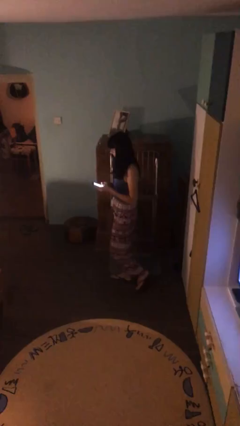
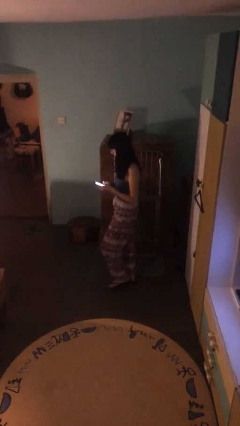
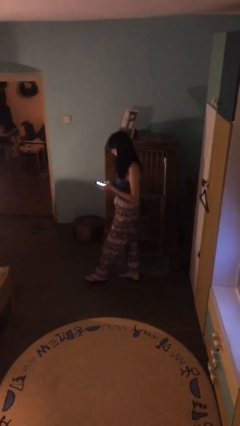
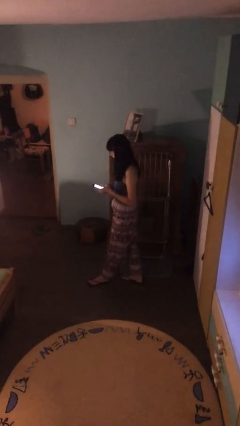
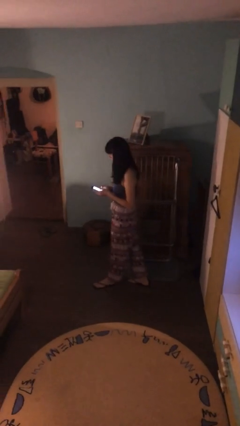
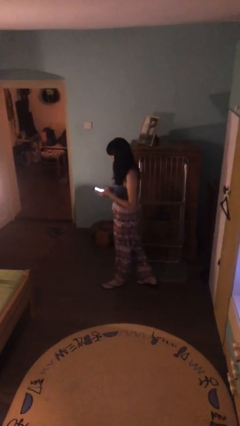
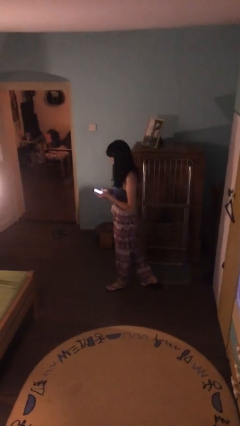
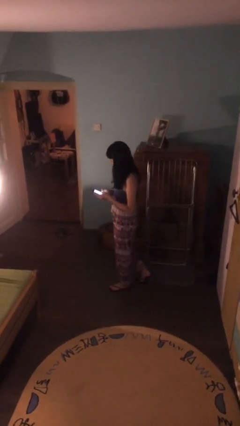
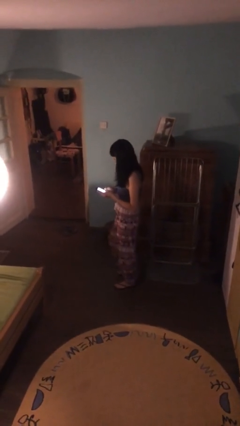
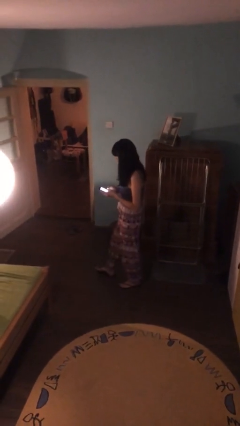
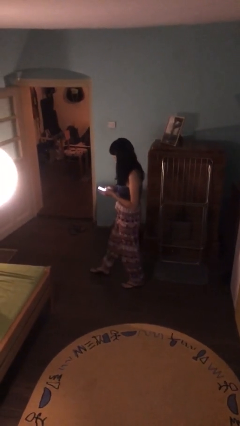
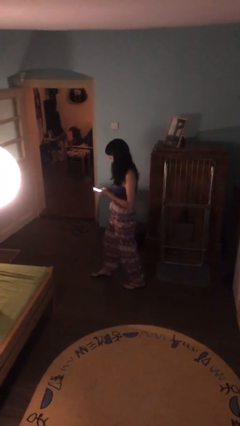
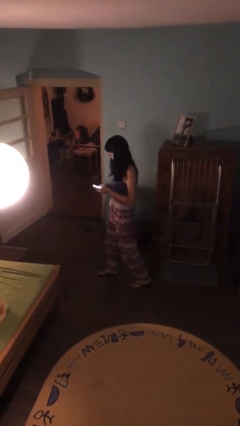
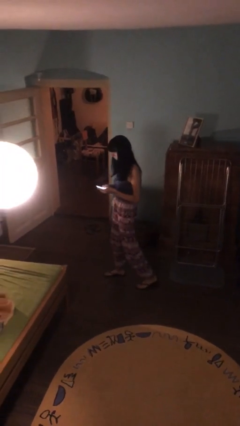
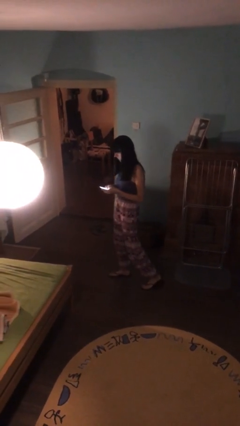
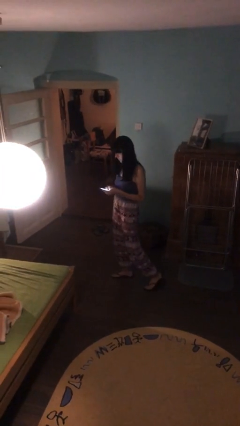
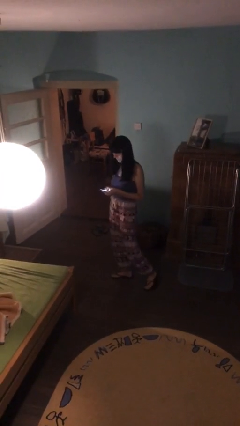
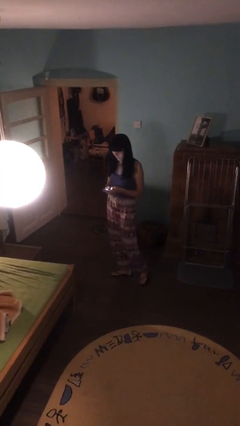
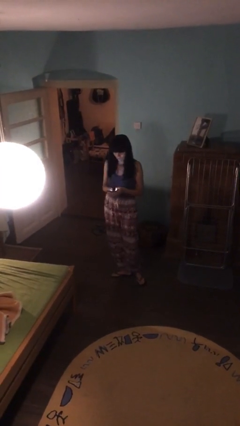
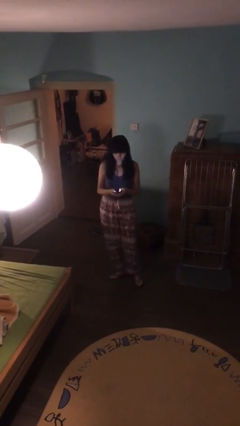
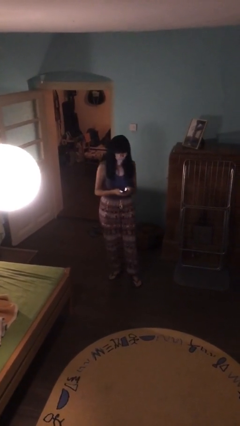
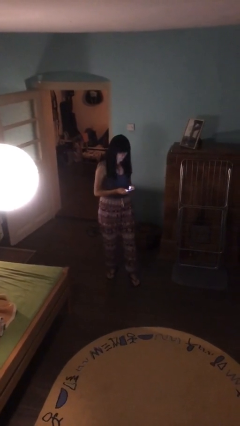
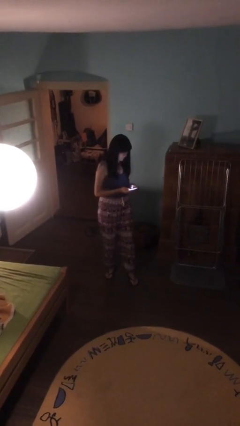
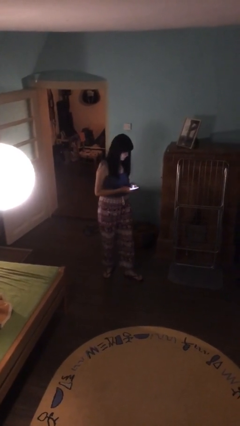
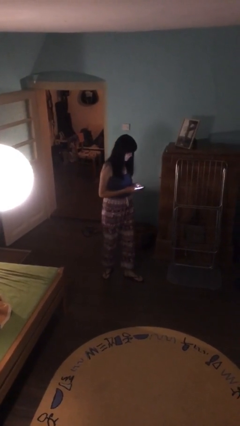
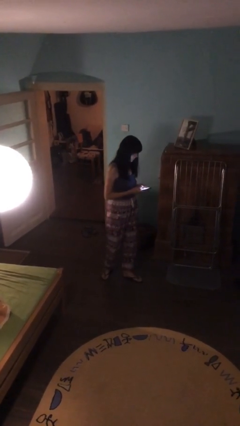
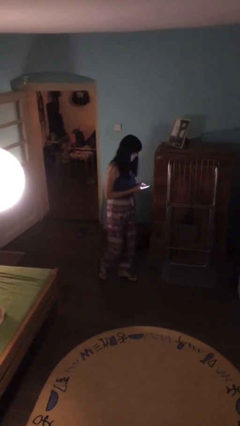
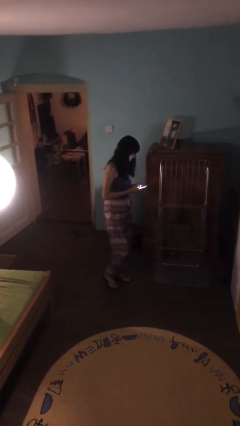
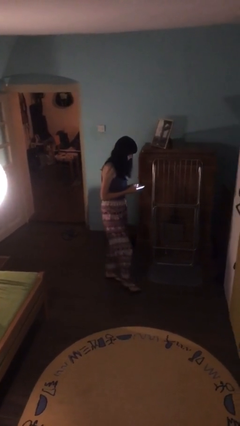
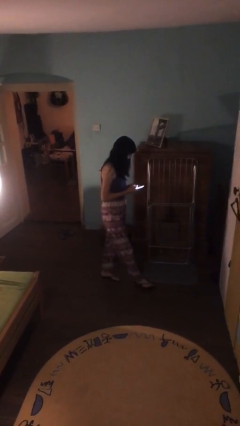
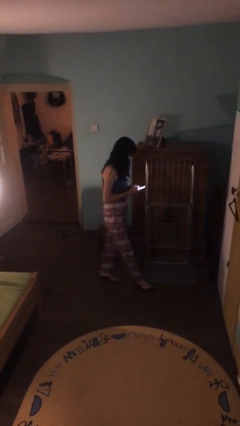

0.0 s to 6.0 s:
person texts on phone

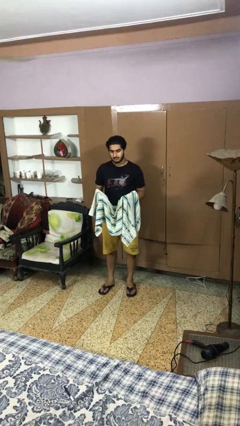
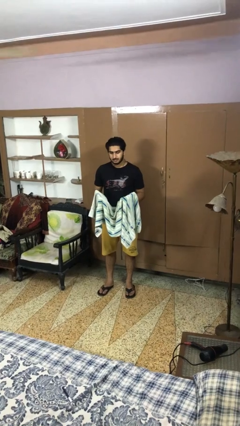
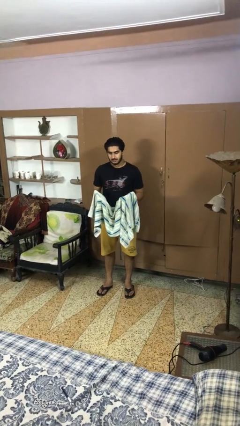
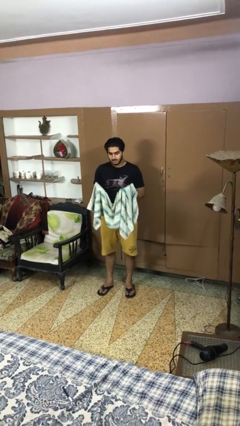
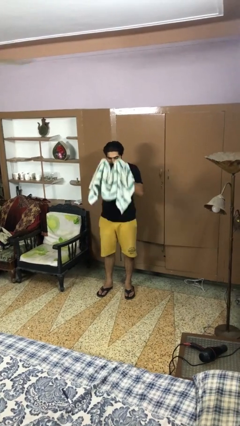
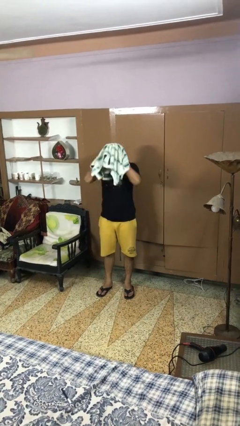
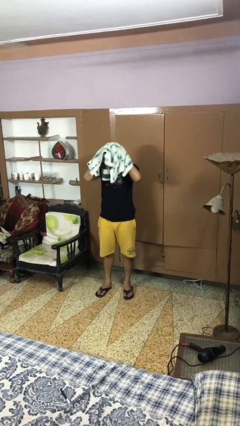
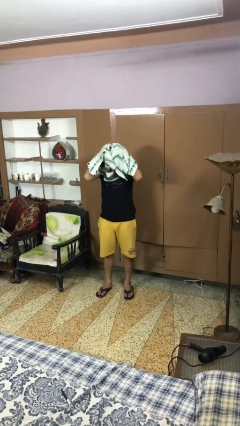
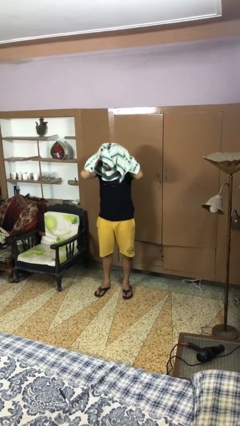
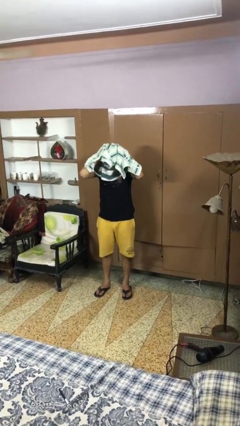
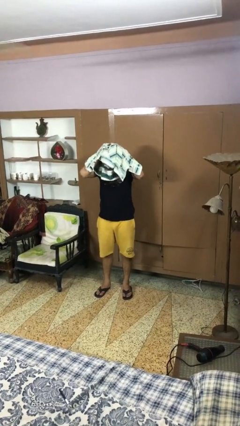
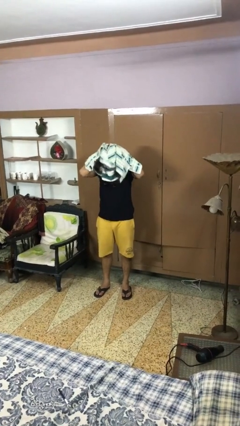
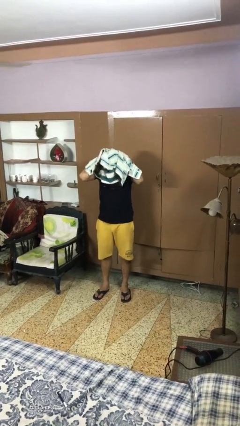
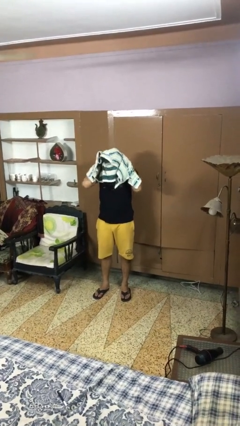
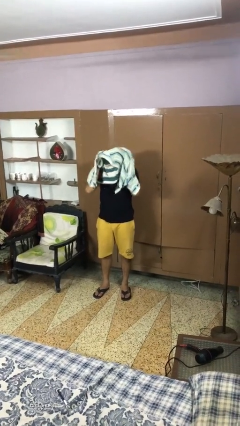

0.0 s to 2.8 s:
person dries hair with towel

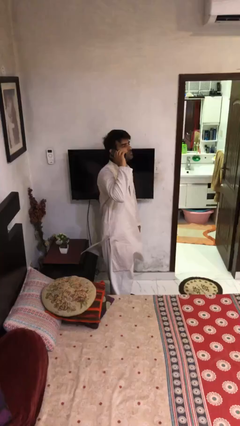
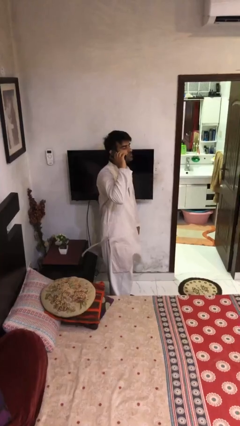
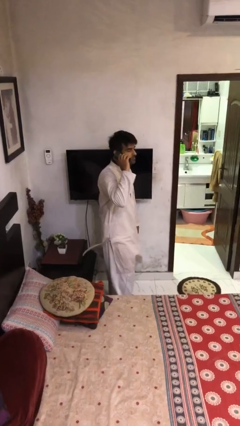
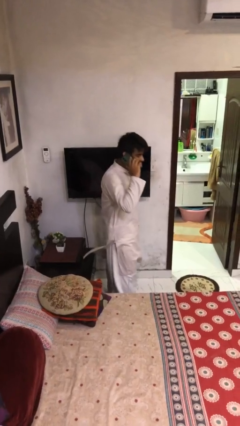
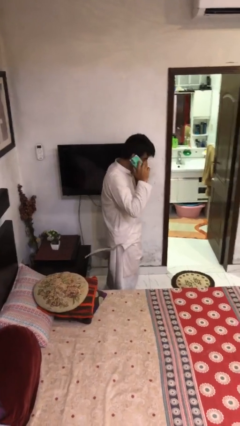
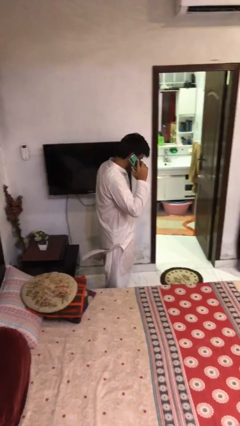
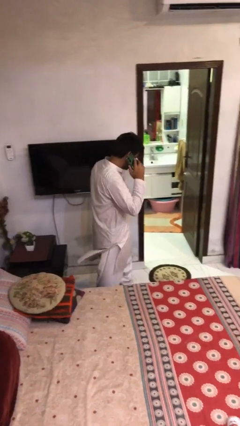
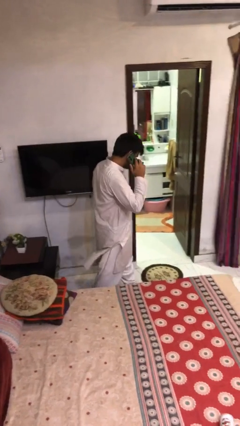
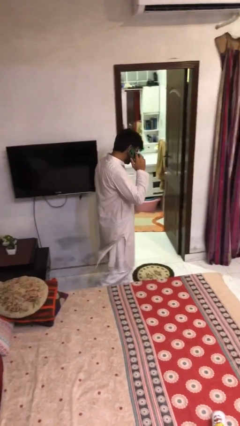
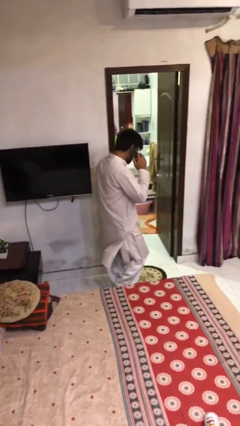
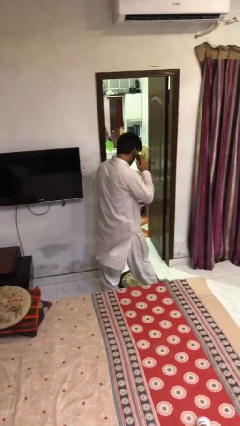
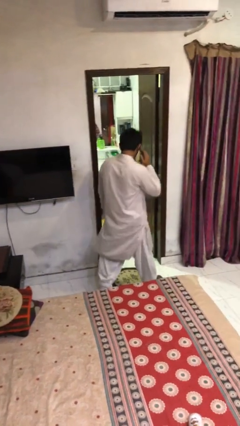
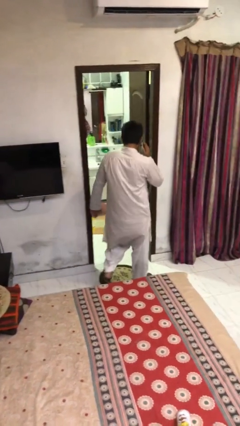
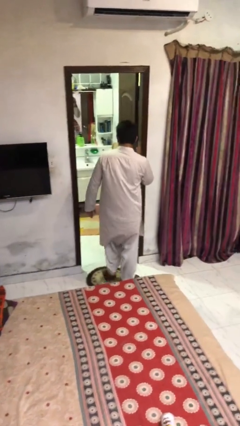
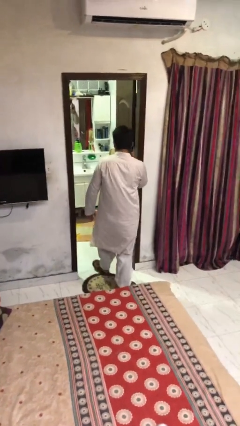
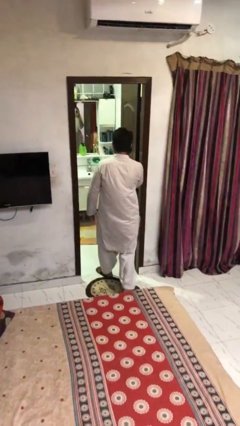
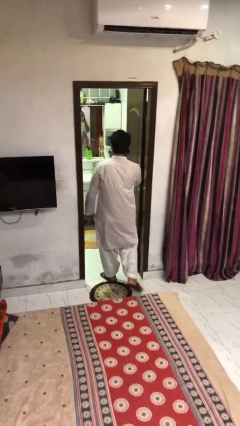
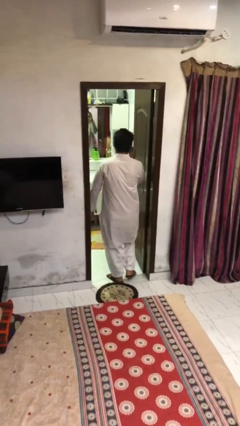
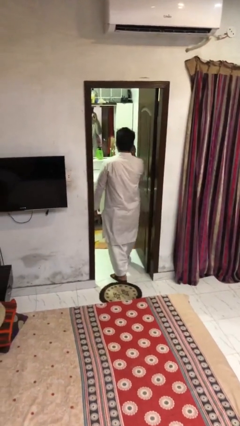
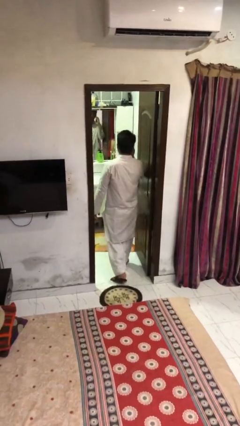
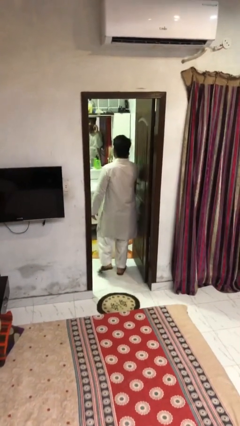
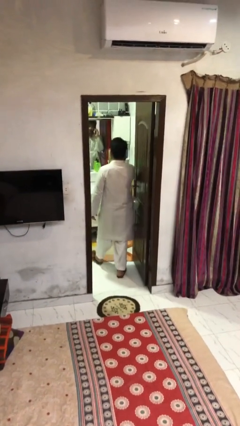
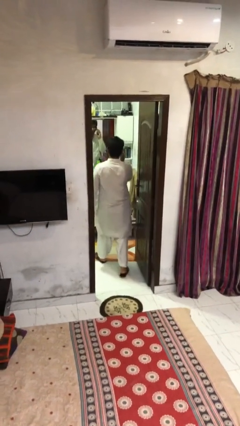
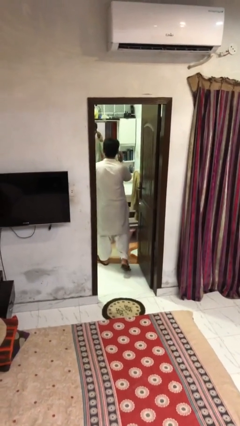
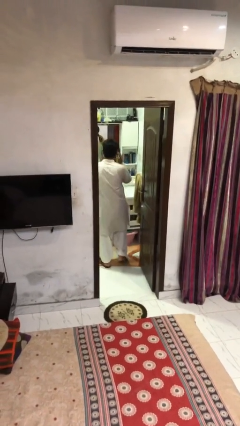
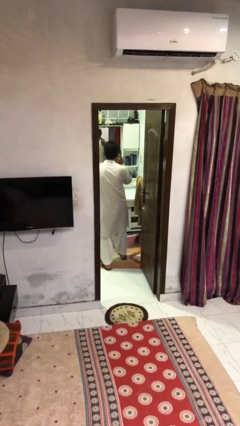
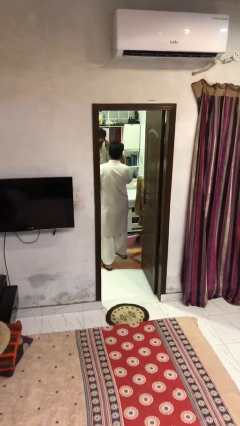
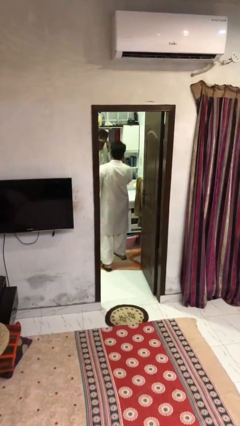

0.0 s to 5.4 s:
person exits scene through structure

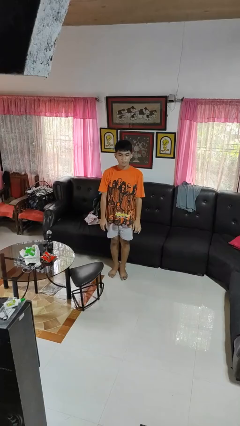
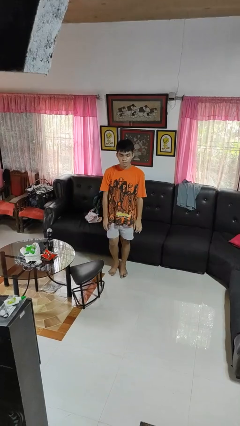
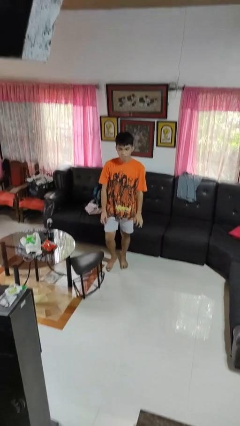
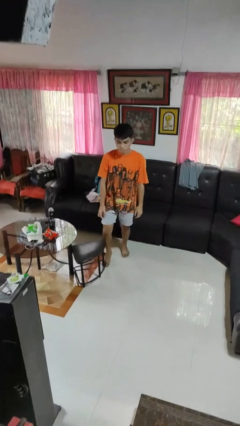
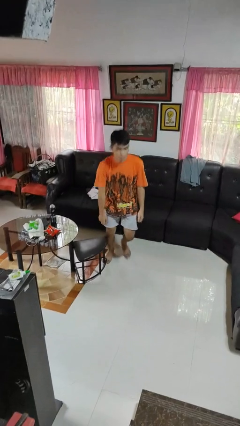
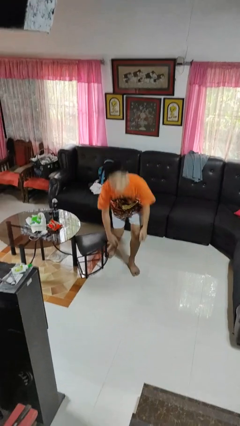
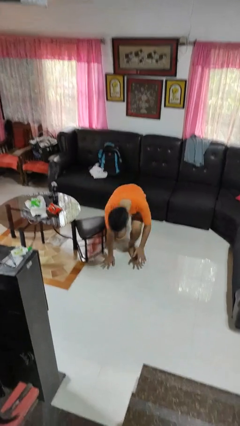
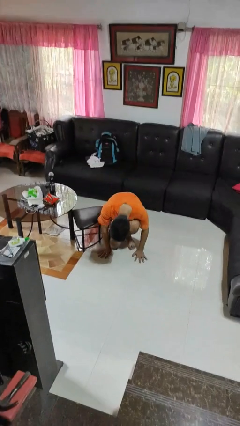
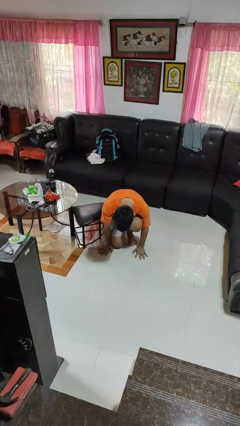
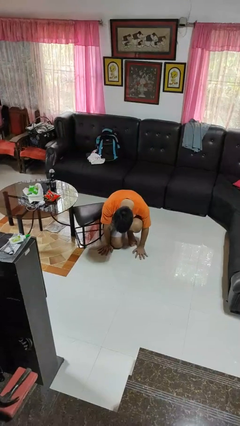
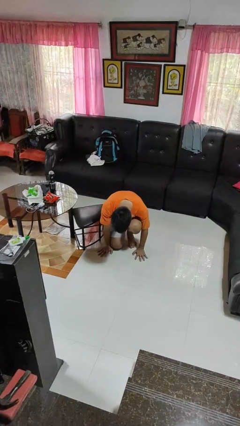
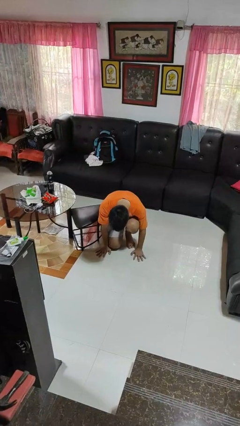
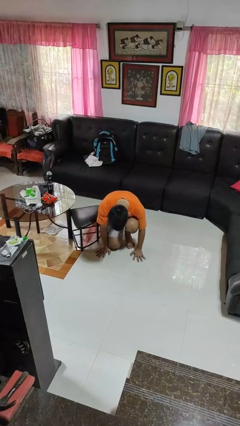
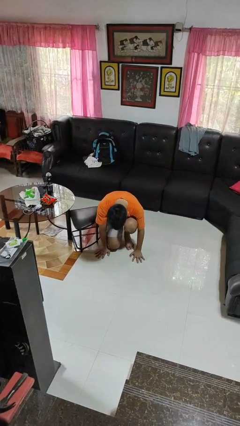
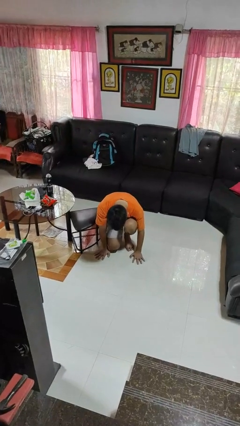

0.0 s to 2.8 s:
person trips on object on floor

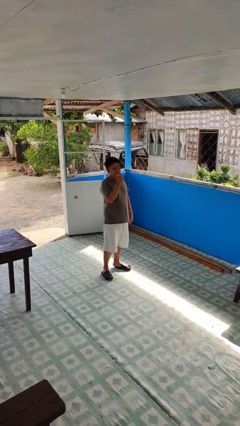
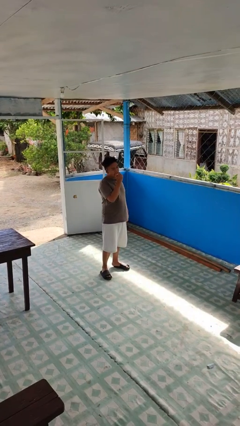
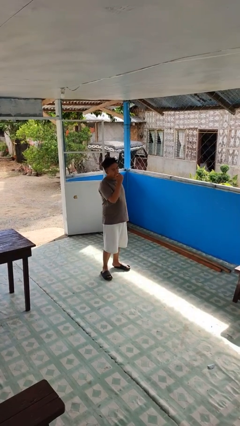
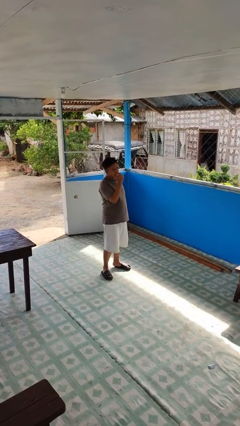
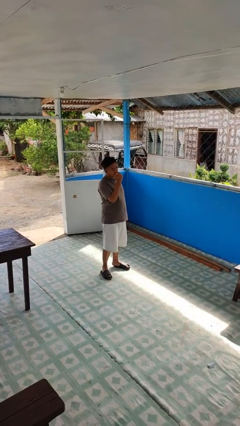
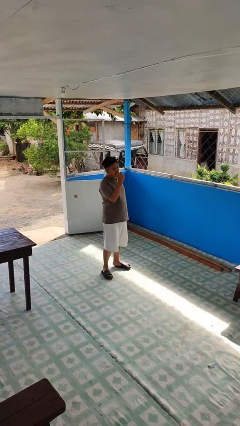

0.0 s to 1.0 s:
person eats apple
